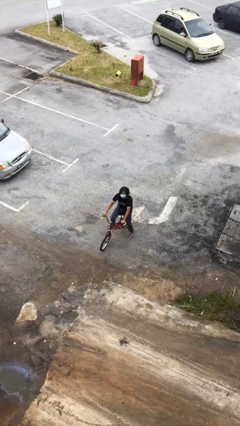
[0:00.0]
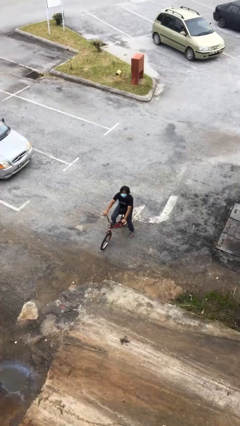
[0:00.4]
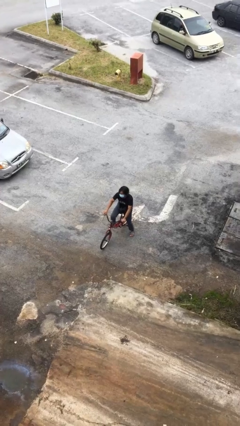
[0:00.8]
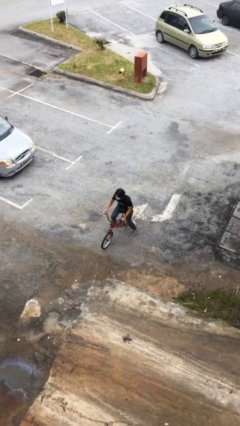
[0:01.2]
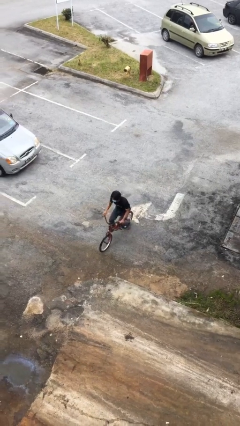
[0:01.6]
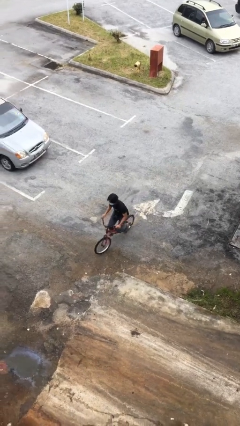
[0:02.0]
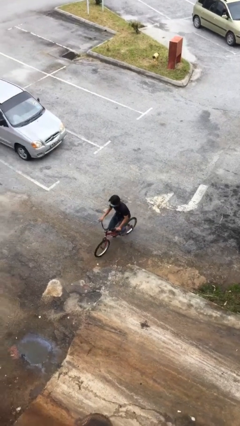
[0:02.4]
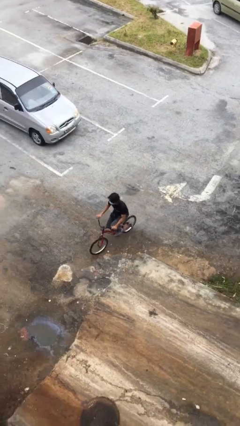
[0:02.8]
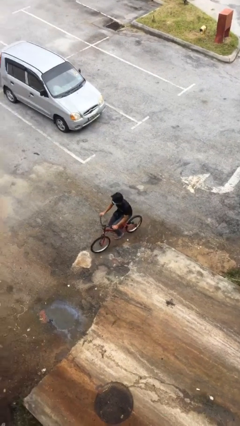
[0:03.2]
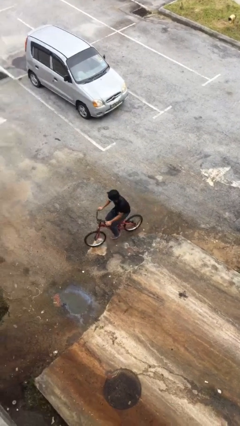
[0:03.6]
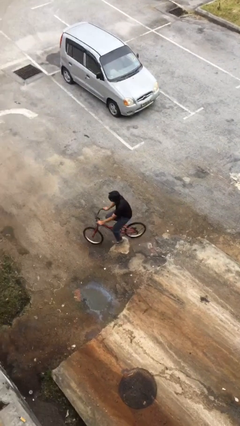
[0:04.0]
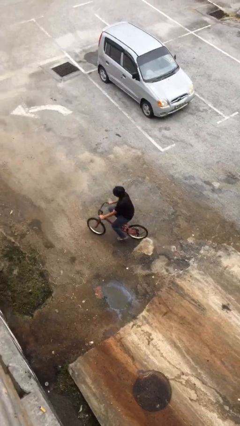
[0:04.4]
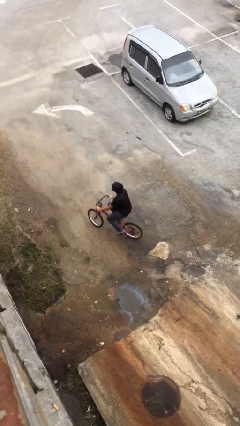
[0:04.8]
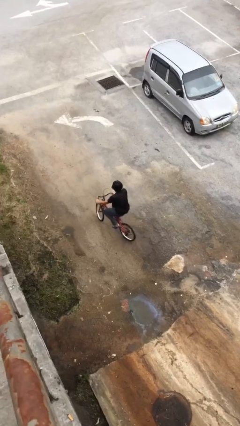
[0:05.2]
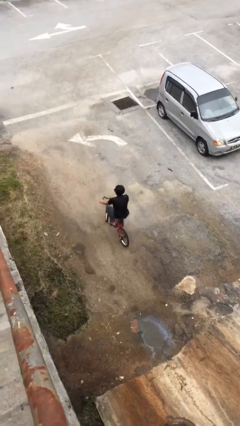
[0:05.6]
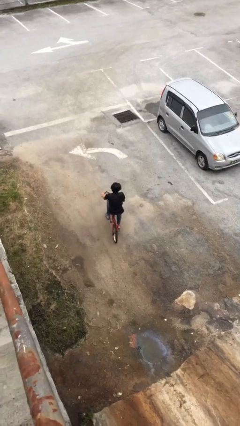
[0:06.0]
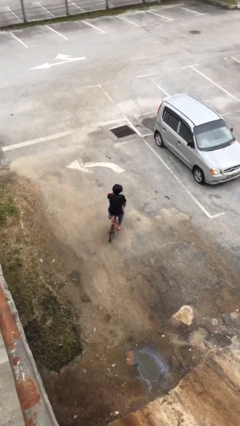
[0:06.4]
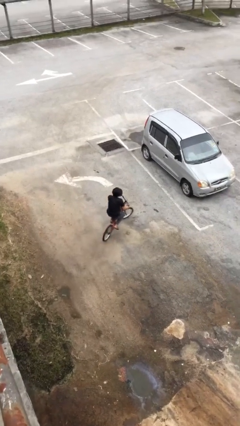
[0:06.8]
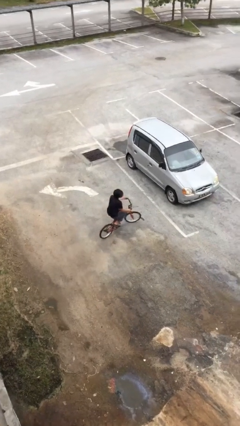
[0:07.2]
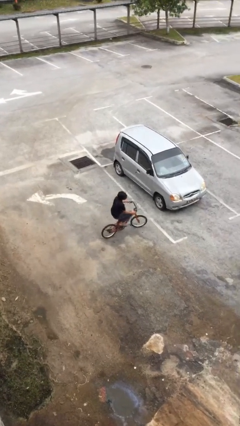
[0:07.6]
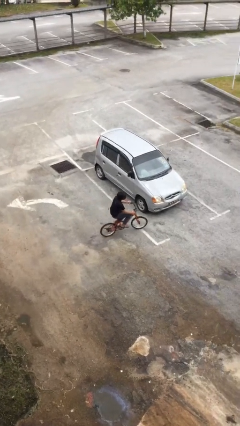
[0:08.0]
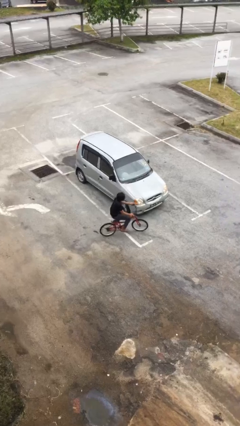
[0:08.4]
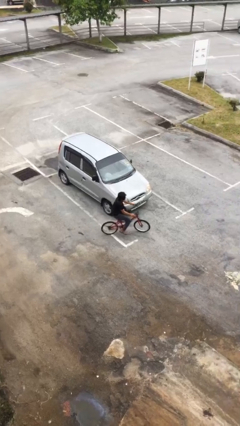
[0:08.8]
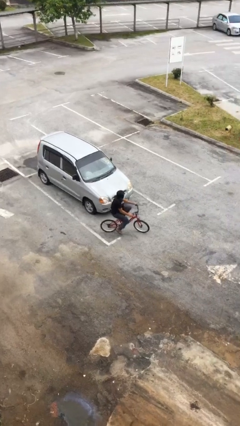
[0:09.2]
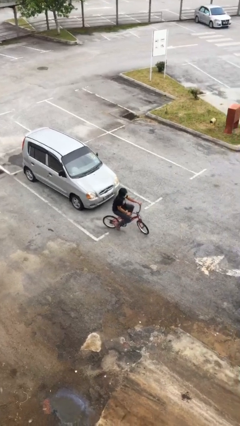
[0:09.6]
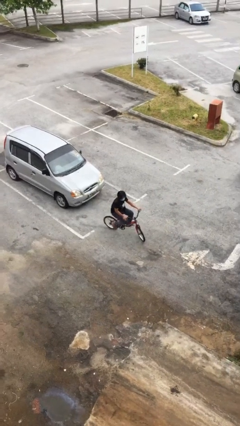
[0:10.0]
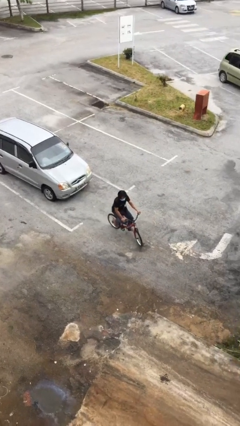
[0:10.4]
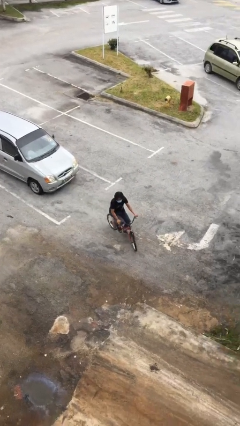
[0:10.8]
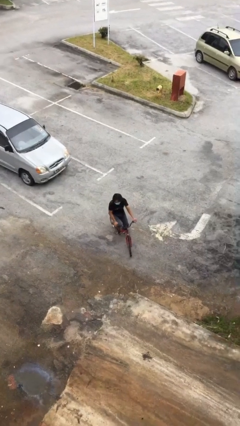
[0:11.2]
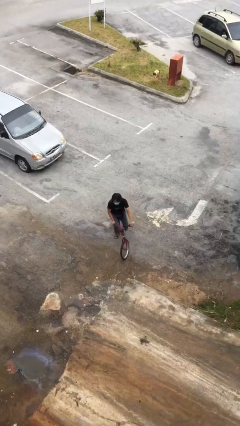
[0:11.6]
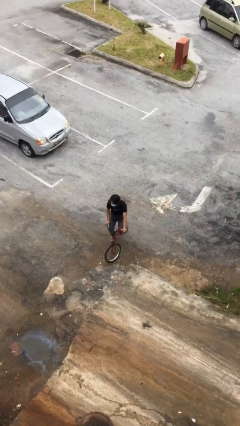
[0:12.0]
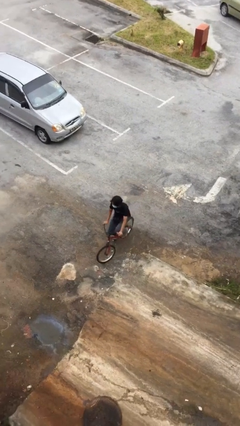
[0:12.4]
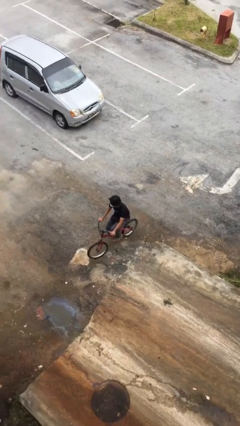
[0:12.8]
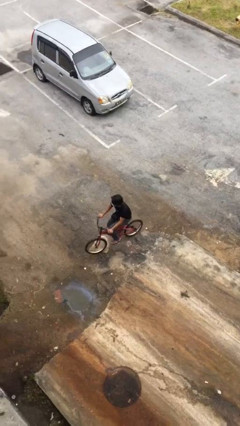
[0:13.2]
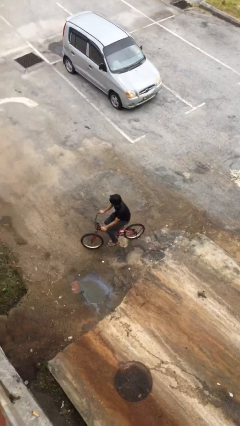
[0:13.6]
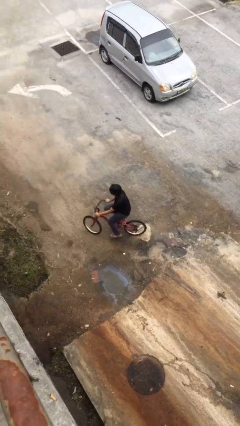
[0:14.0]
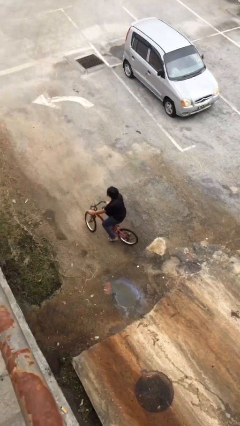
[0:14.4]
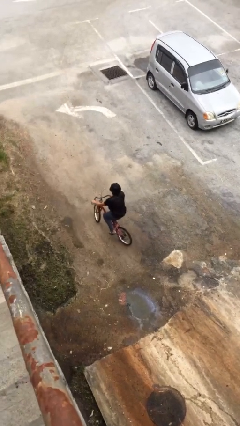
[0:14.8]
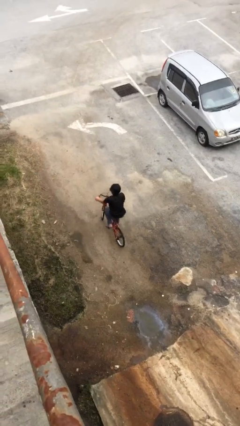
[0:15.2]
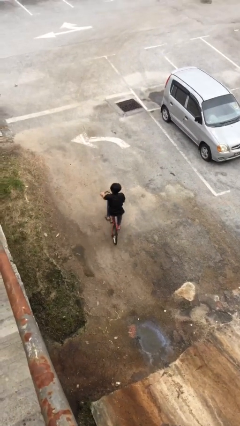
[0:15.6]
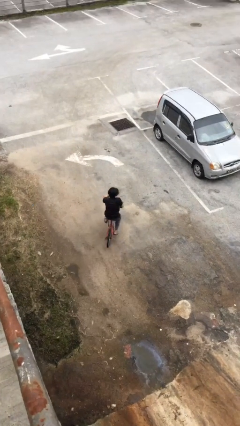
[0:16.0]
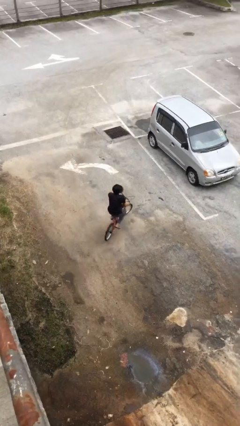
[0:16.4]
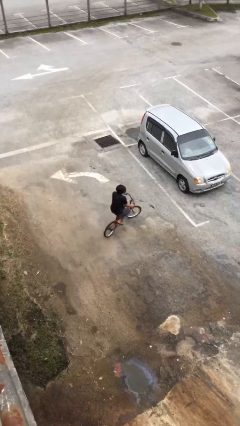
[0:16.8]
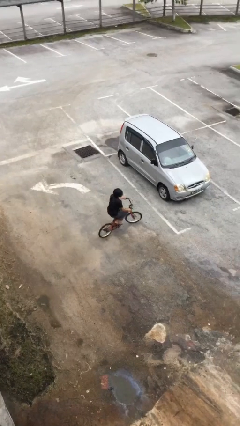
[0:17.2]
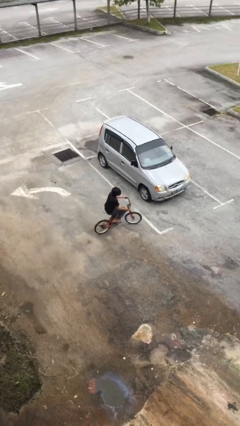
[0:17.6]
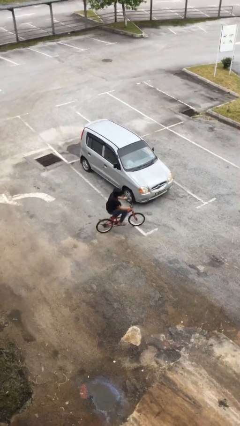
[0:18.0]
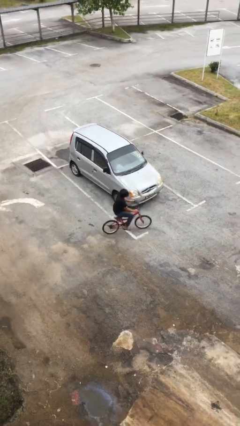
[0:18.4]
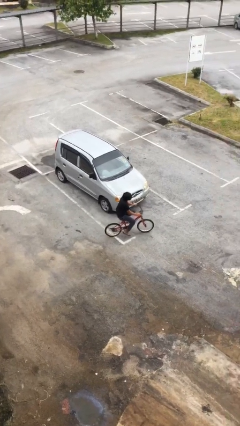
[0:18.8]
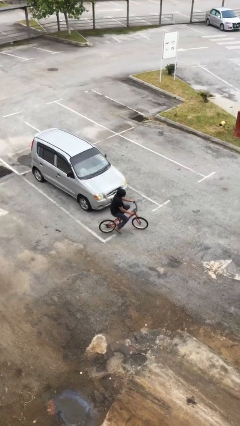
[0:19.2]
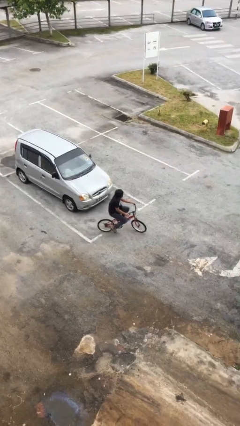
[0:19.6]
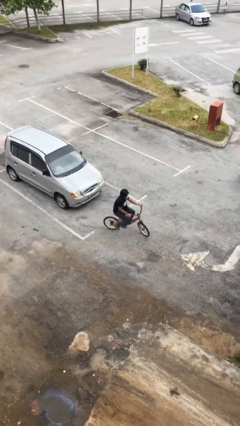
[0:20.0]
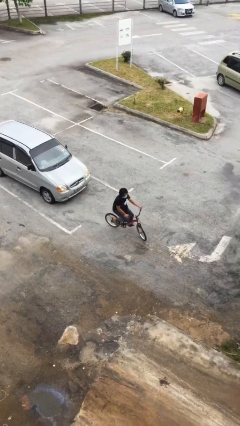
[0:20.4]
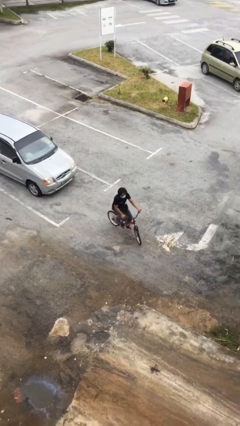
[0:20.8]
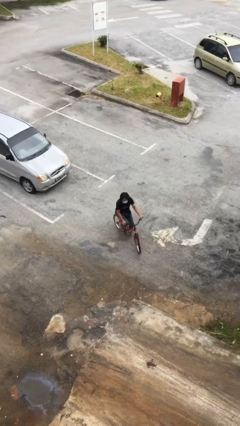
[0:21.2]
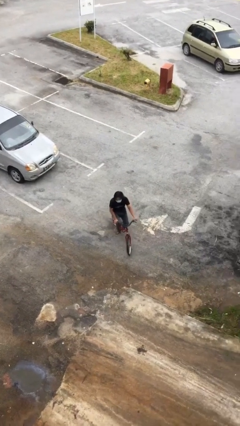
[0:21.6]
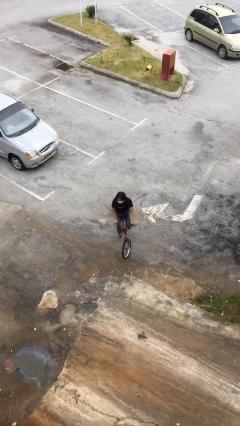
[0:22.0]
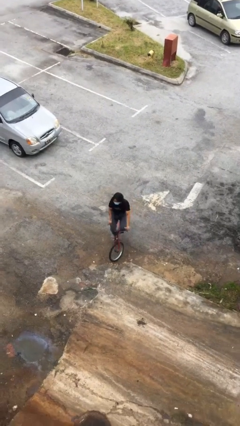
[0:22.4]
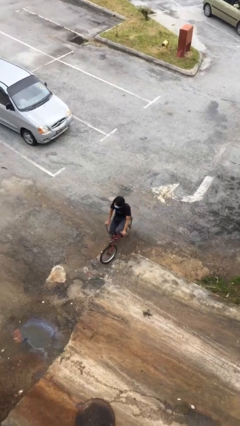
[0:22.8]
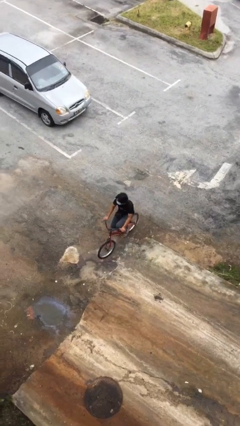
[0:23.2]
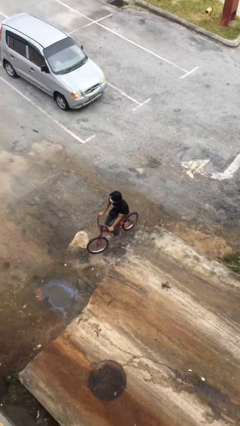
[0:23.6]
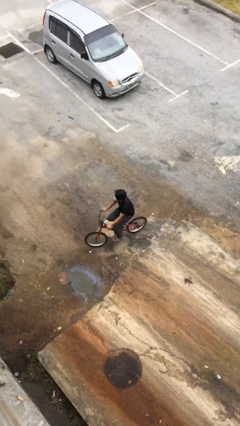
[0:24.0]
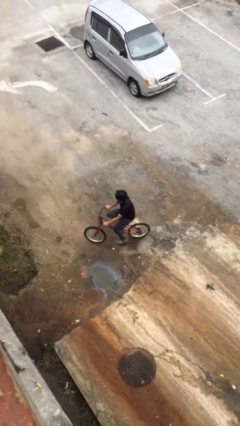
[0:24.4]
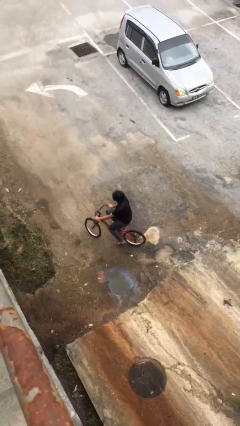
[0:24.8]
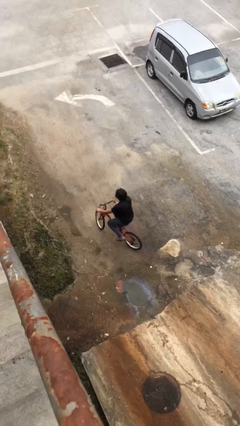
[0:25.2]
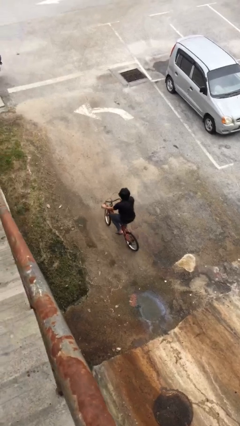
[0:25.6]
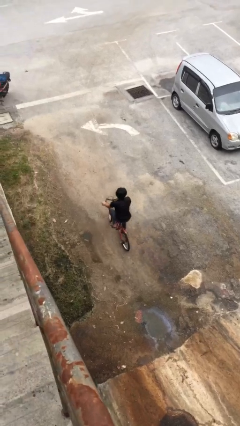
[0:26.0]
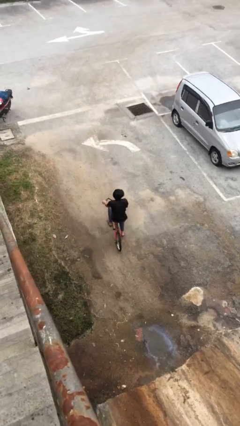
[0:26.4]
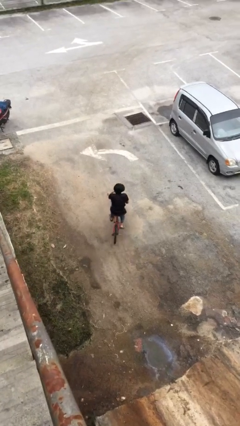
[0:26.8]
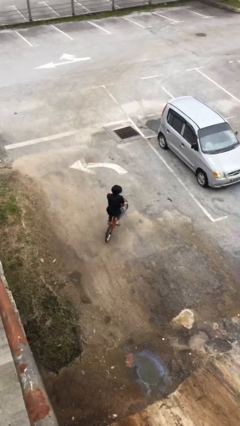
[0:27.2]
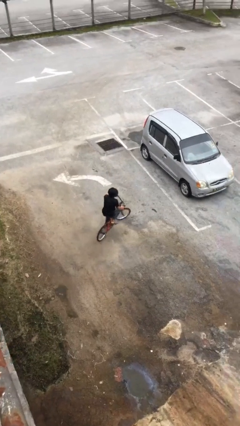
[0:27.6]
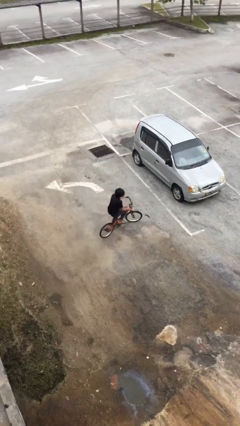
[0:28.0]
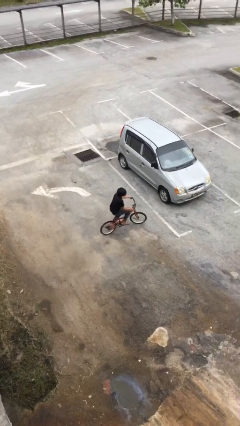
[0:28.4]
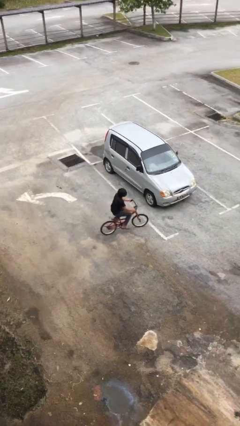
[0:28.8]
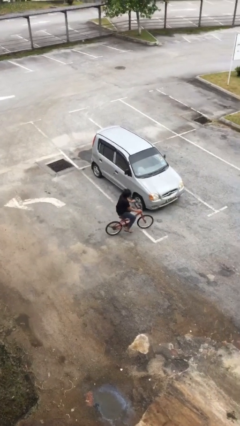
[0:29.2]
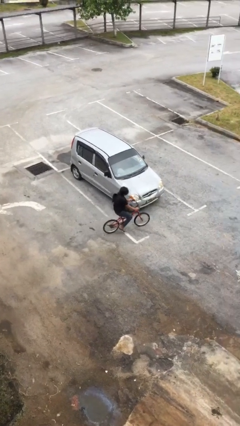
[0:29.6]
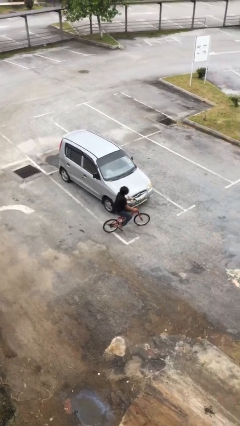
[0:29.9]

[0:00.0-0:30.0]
person rides bicycle

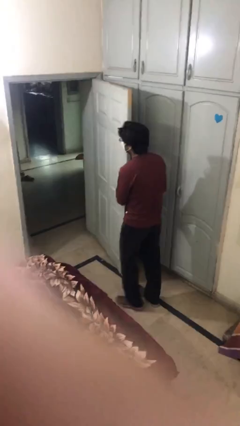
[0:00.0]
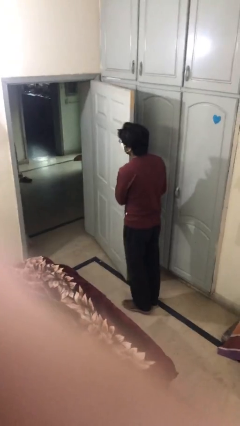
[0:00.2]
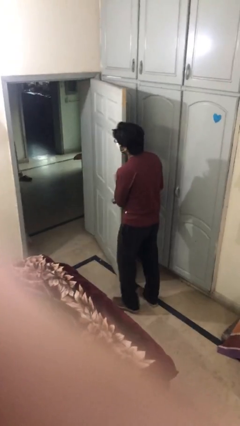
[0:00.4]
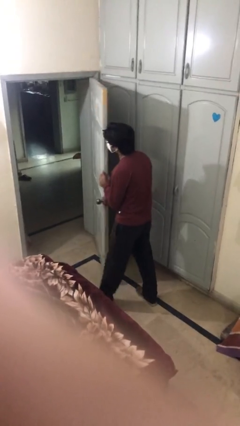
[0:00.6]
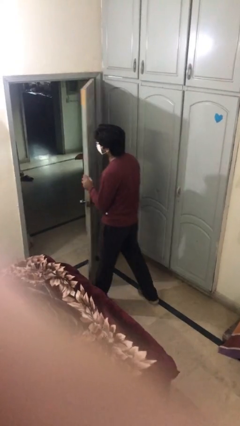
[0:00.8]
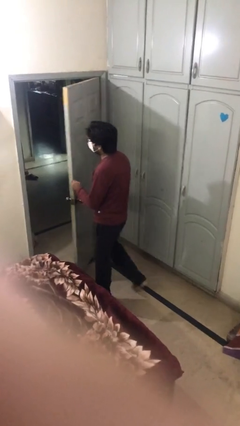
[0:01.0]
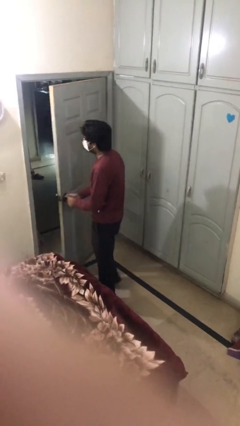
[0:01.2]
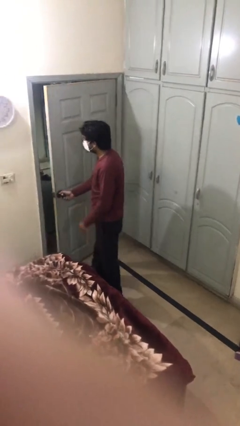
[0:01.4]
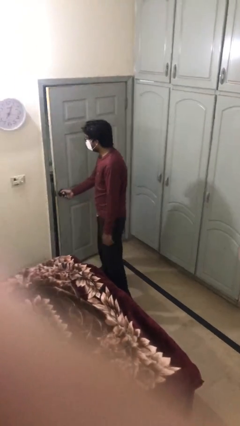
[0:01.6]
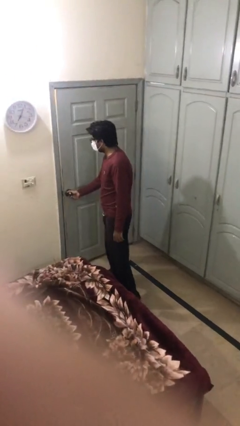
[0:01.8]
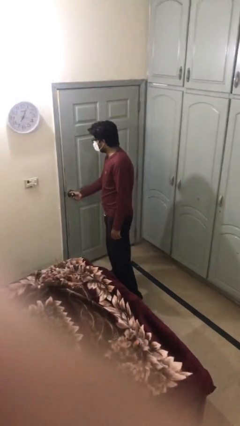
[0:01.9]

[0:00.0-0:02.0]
person closes facility door

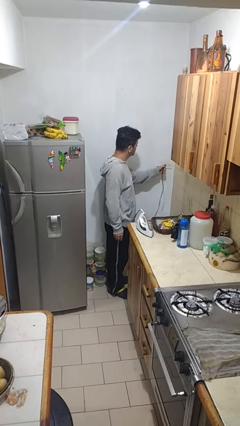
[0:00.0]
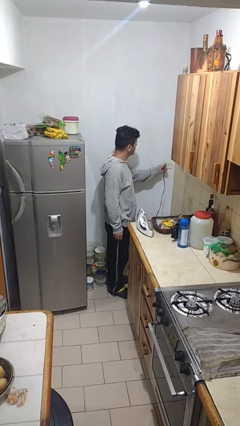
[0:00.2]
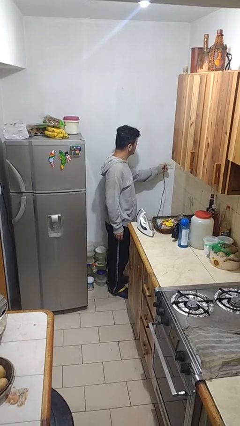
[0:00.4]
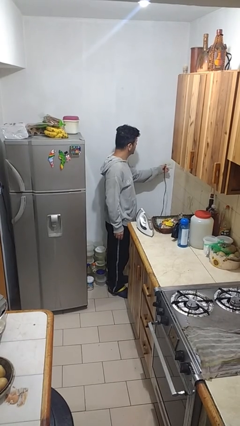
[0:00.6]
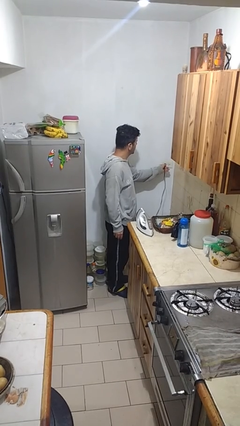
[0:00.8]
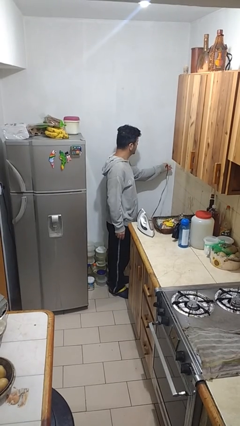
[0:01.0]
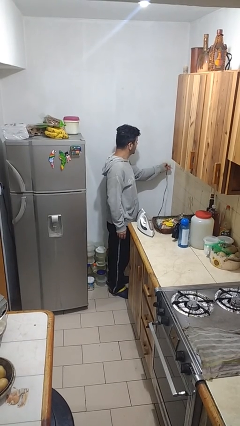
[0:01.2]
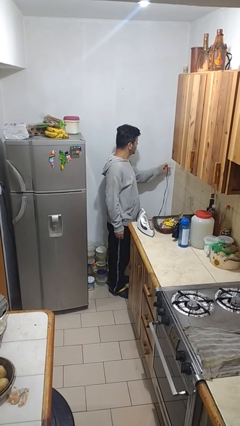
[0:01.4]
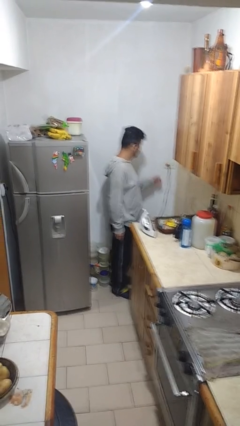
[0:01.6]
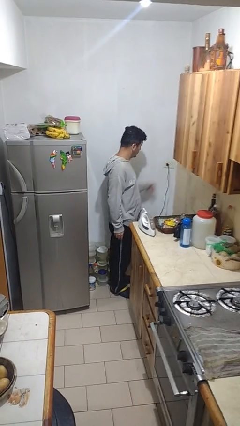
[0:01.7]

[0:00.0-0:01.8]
person plugs into electrical socket
